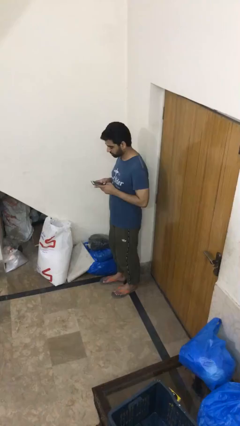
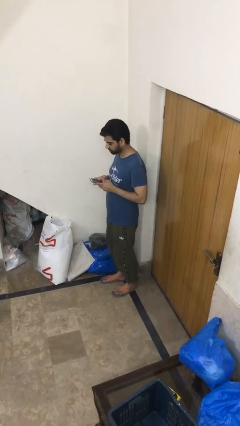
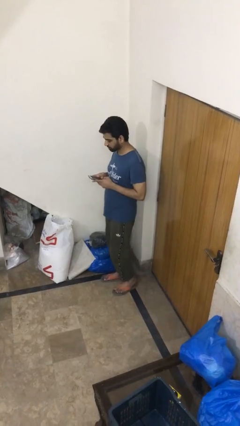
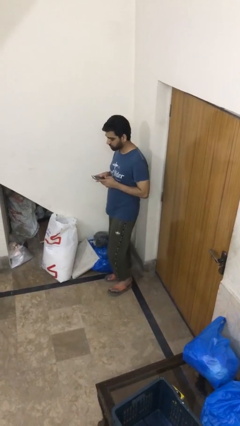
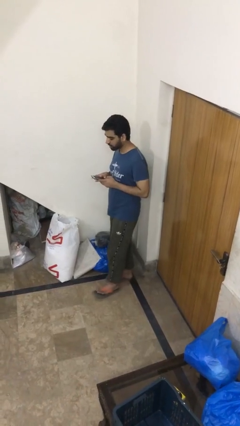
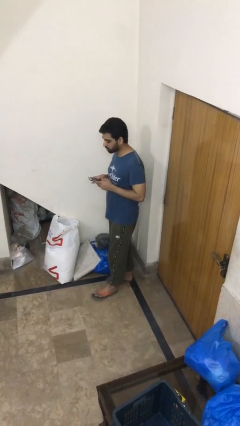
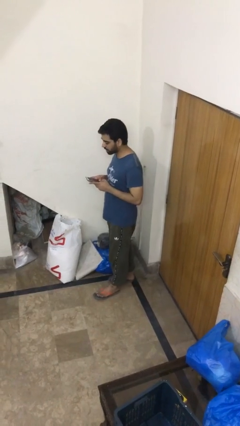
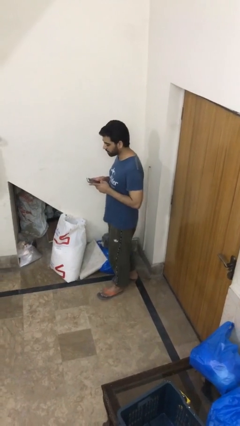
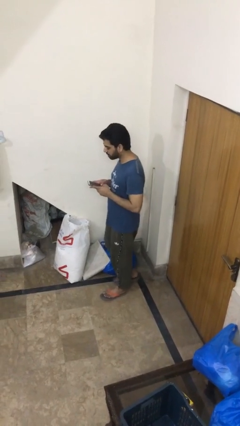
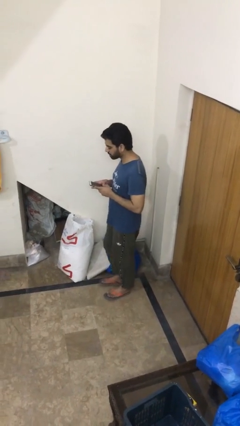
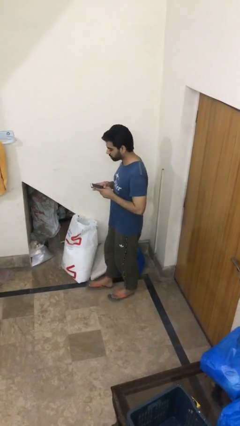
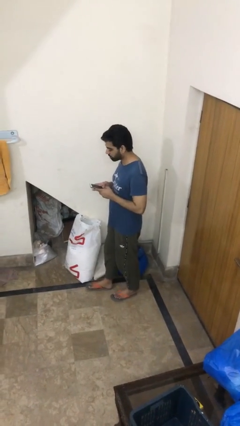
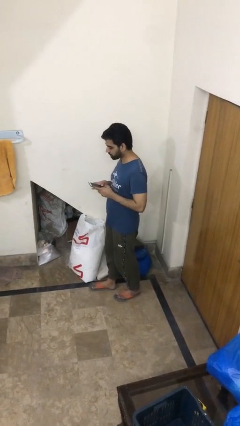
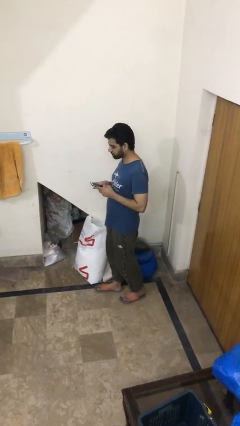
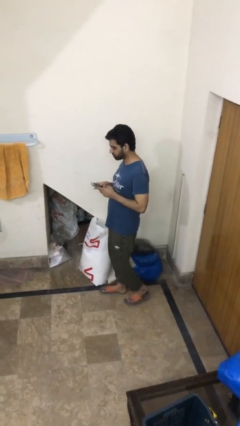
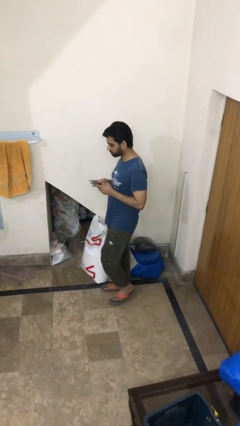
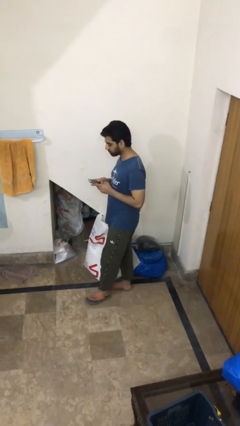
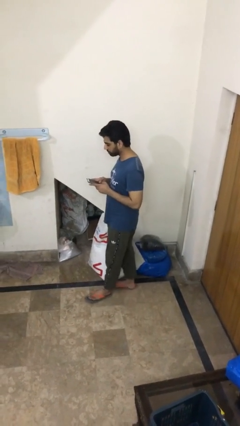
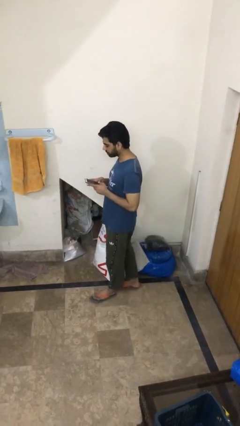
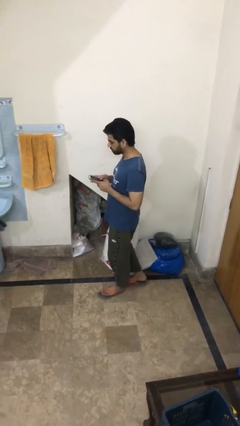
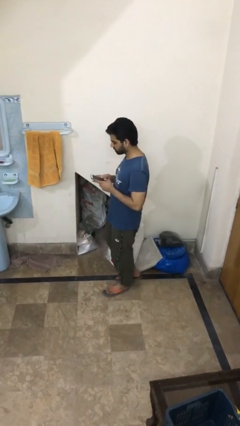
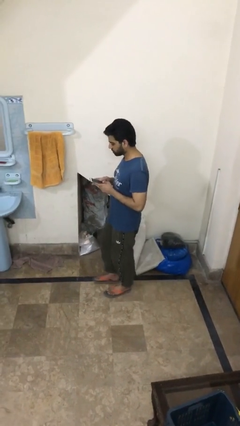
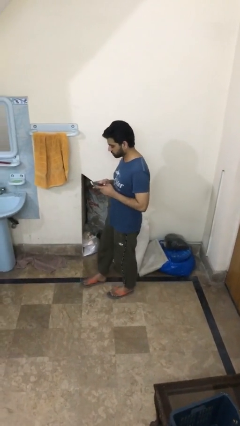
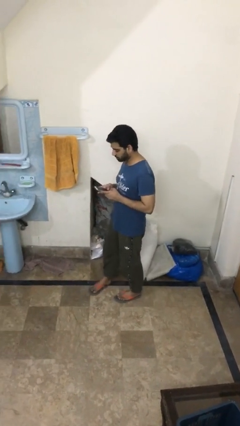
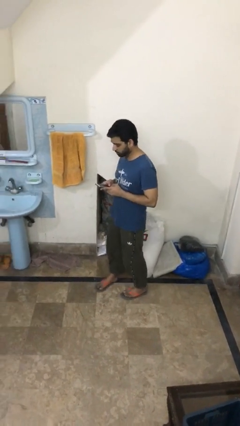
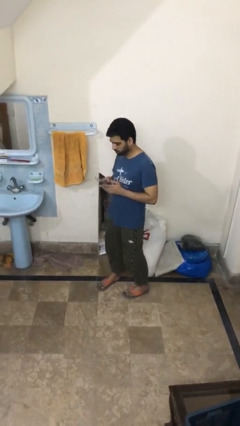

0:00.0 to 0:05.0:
person texts on phone

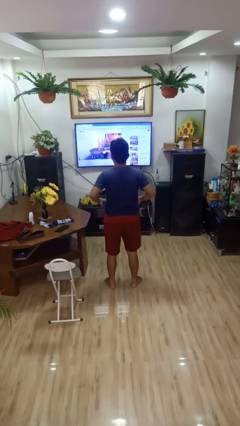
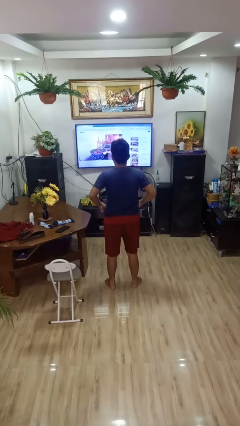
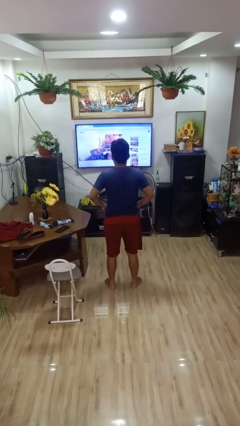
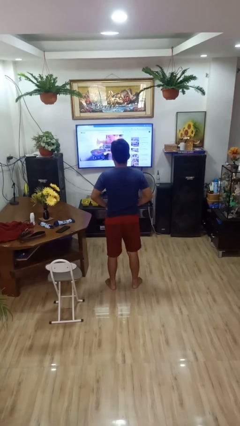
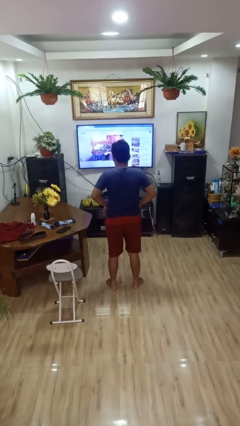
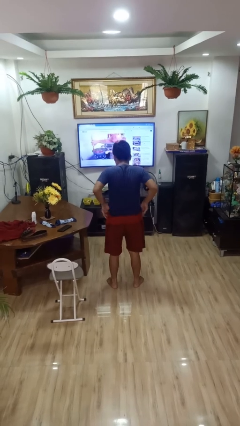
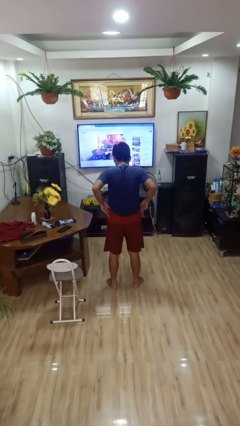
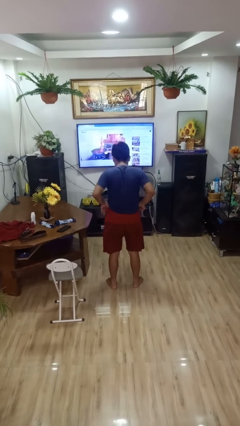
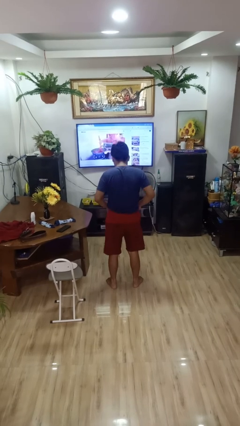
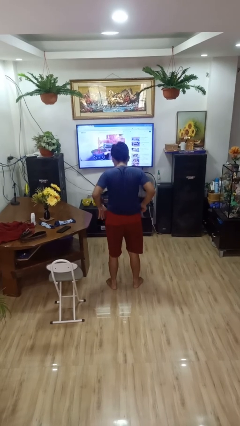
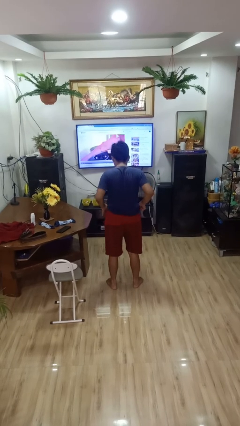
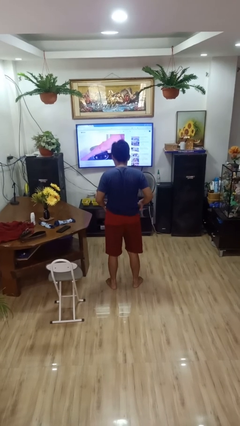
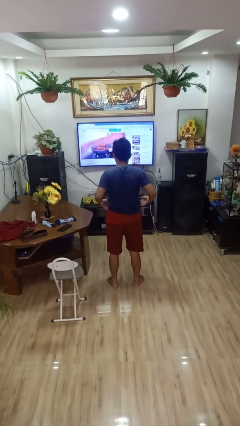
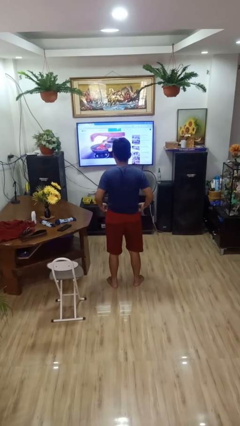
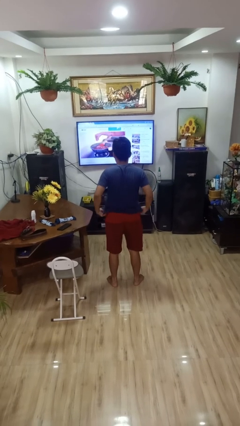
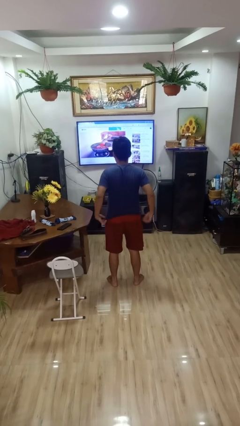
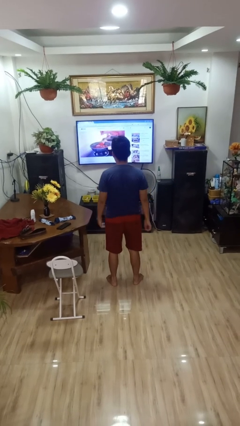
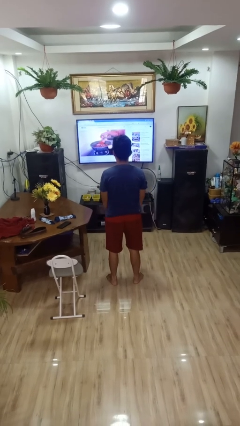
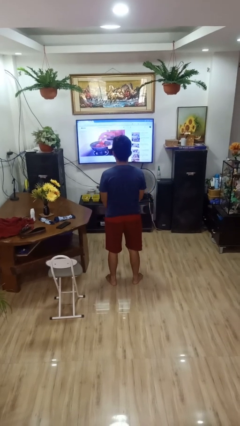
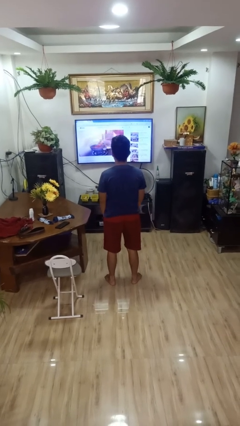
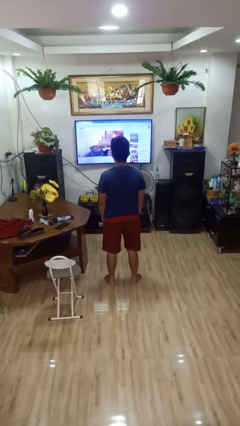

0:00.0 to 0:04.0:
person hikes up pants

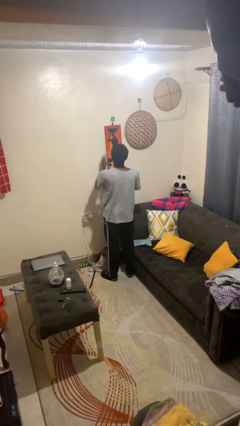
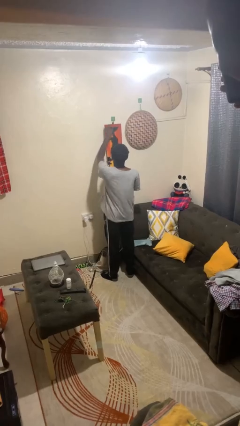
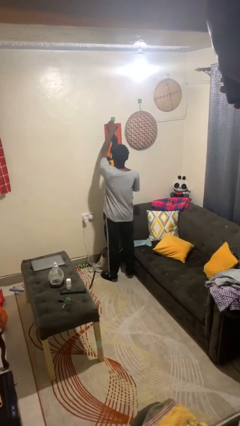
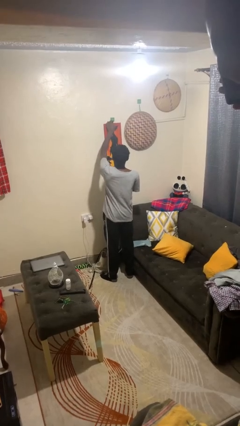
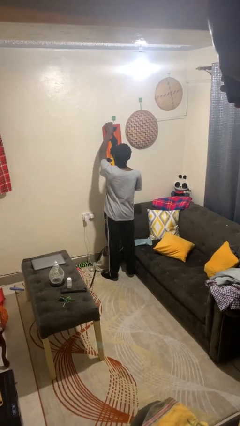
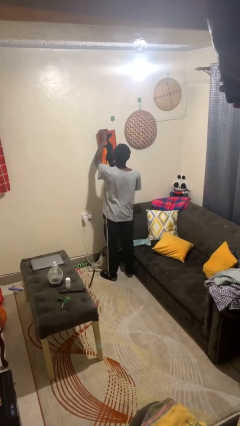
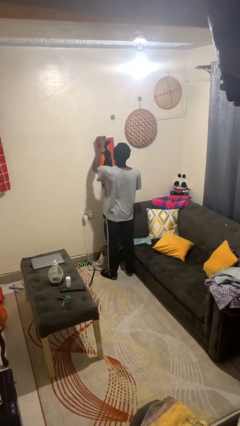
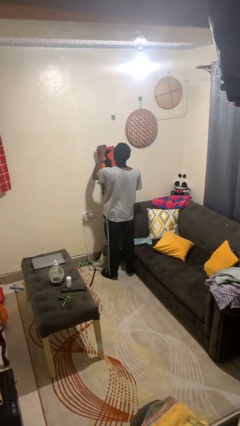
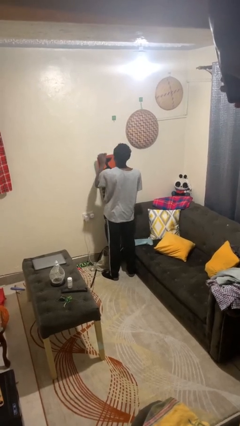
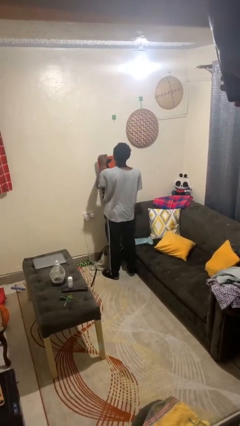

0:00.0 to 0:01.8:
person takes down picture frame

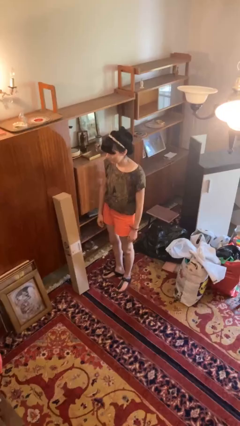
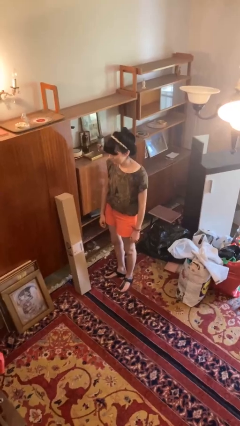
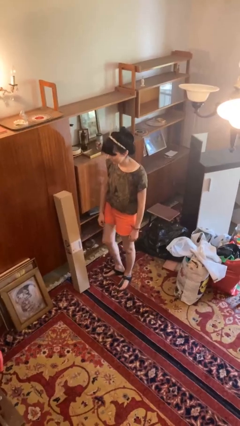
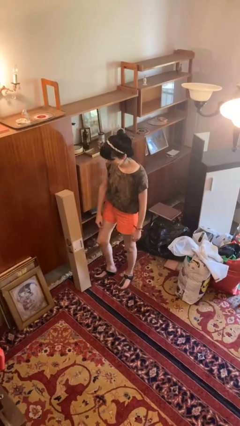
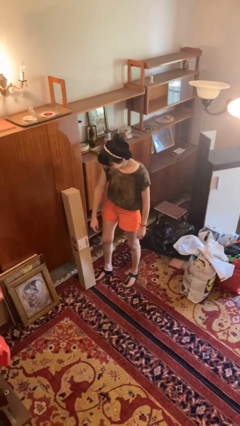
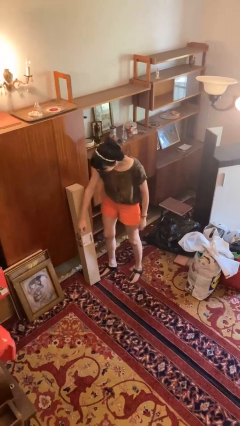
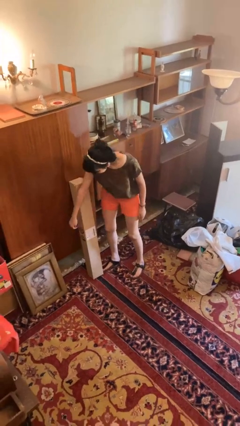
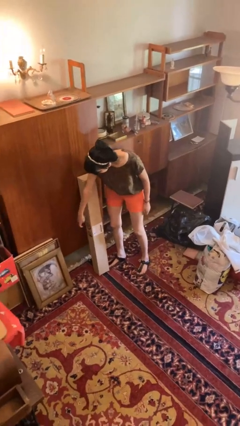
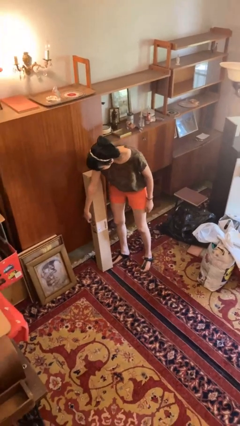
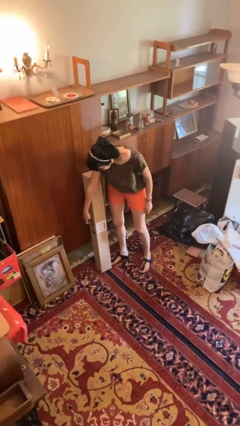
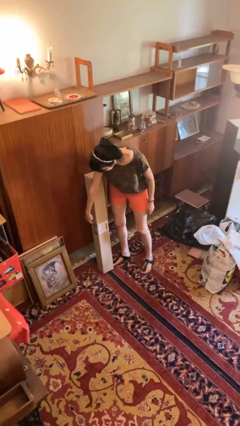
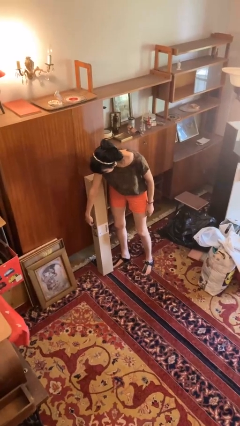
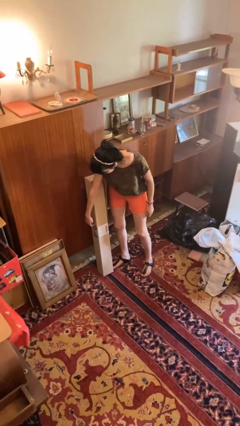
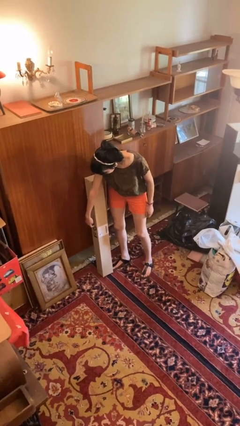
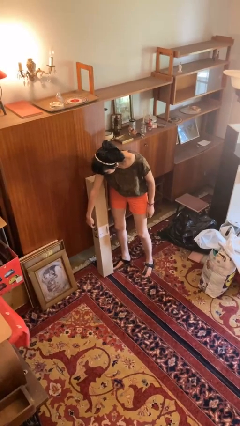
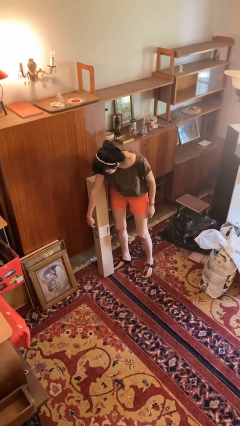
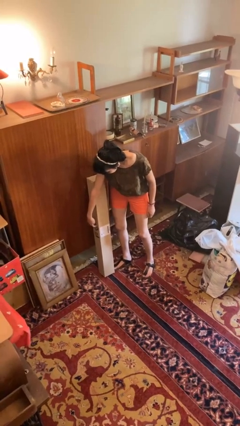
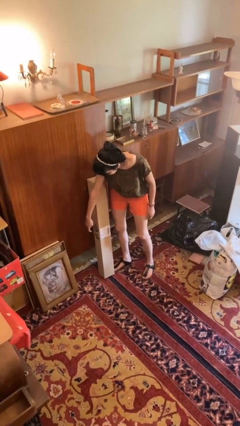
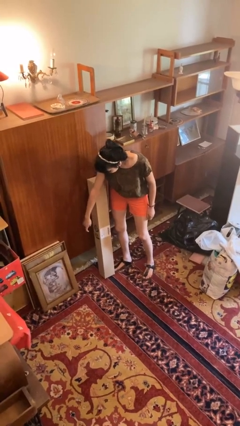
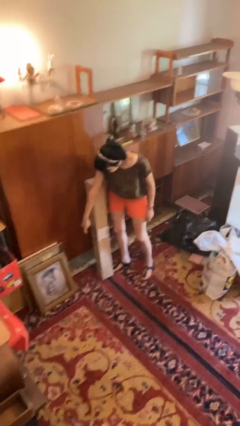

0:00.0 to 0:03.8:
person taps object with finger

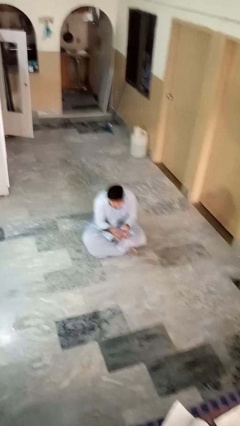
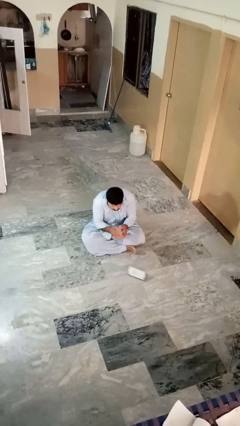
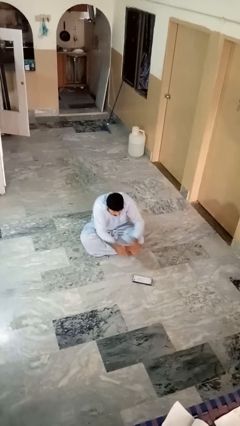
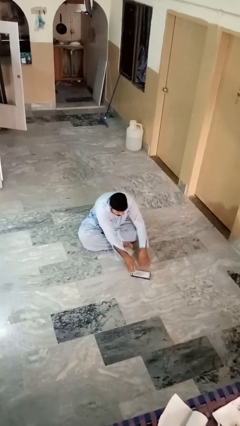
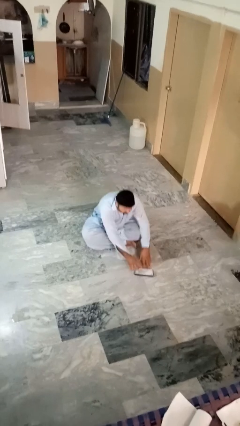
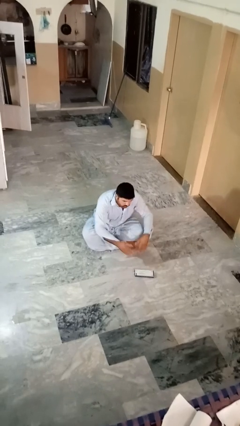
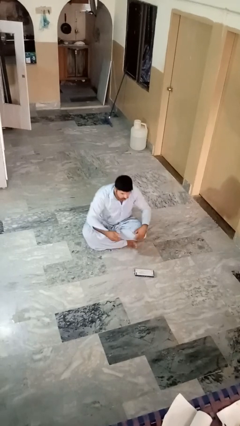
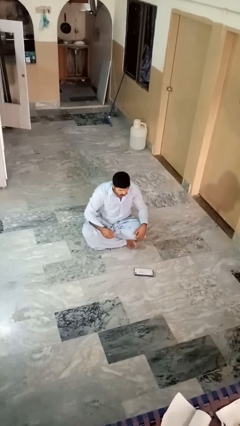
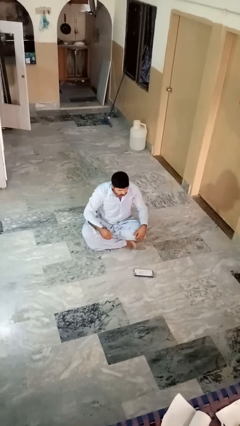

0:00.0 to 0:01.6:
person catches dropped object

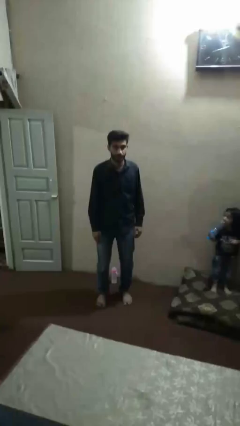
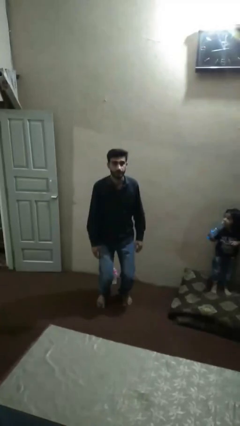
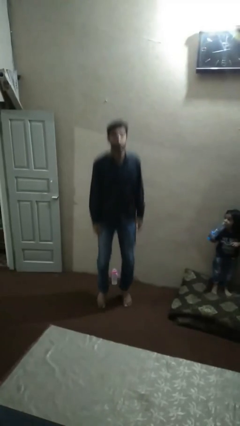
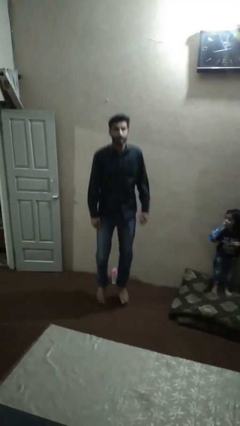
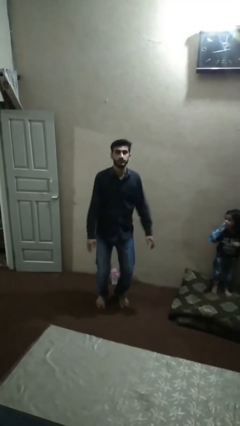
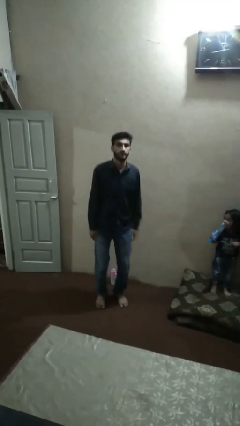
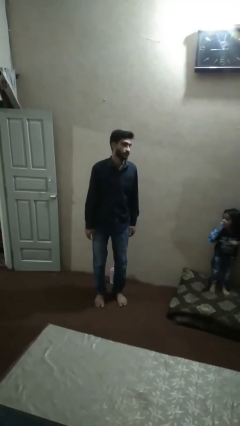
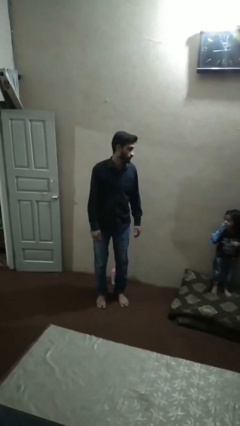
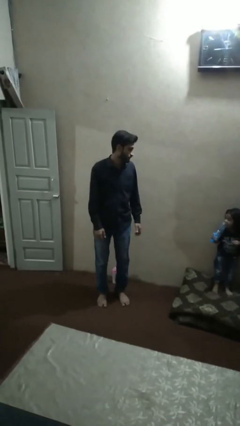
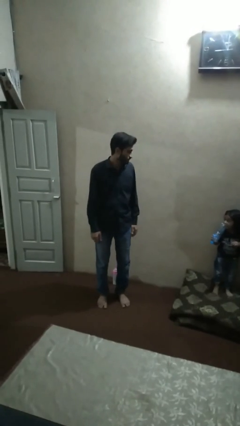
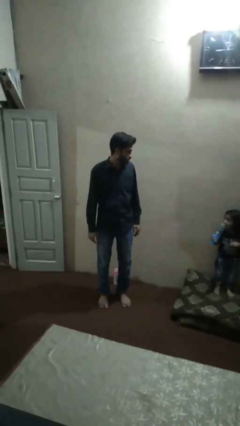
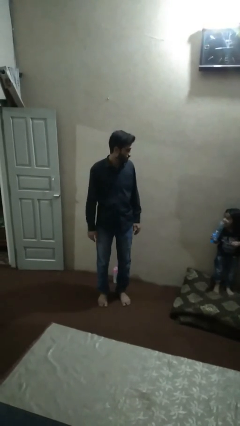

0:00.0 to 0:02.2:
person jumps
